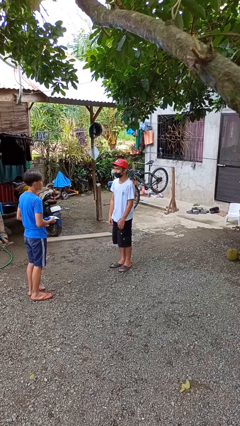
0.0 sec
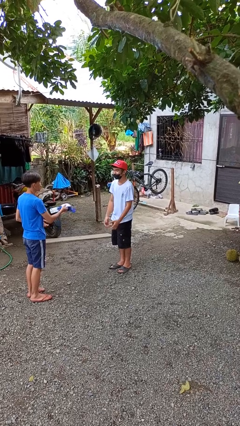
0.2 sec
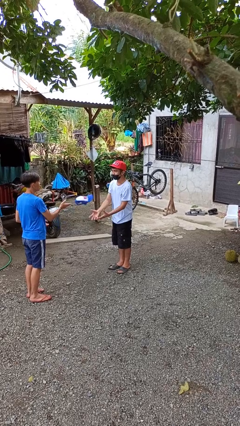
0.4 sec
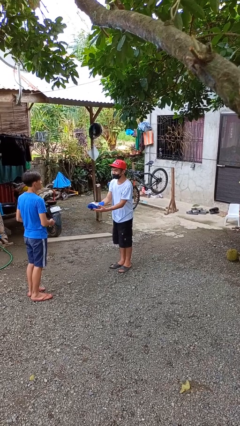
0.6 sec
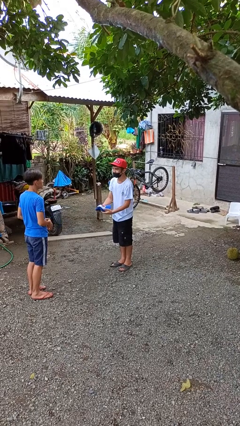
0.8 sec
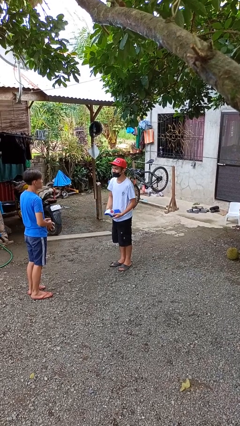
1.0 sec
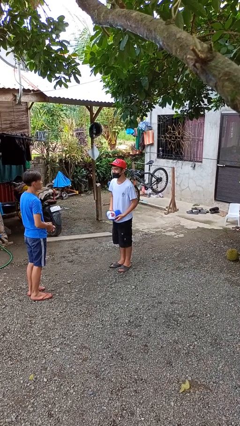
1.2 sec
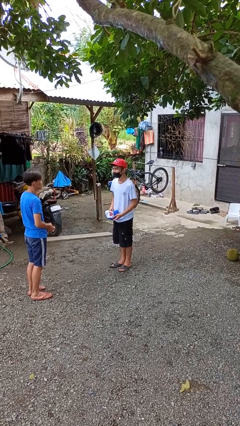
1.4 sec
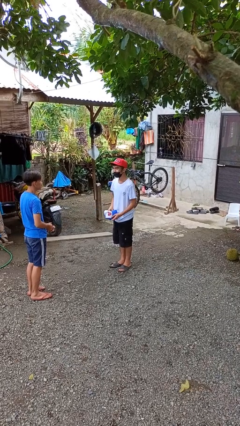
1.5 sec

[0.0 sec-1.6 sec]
person catches object from person

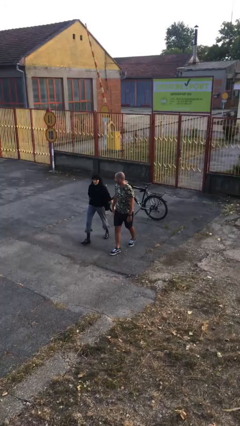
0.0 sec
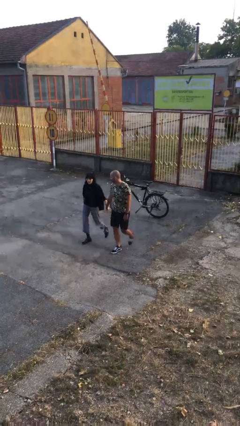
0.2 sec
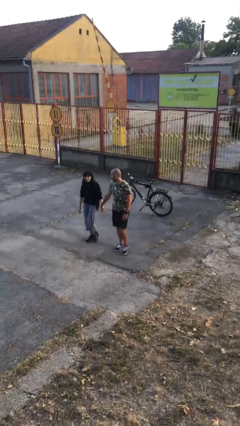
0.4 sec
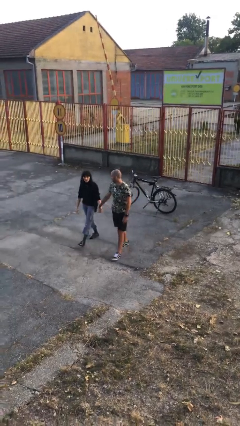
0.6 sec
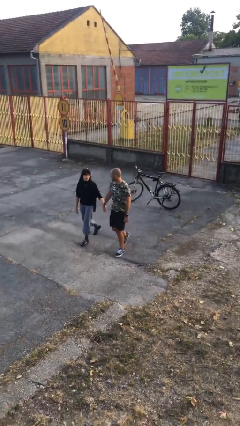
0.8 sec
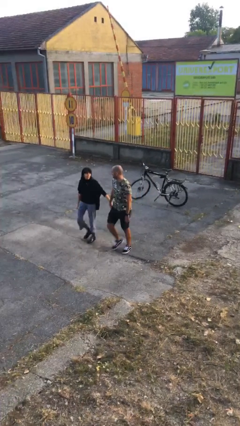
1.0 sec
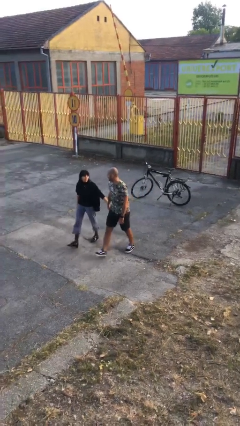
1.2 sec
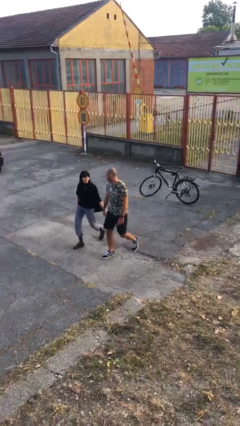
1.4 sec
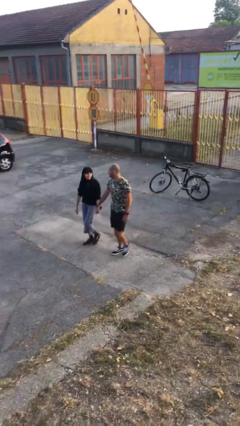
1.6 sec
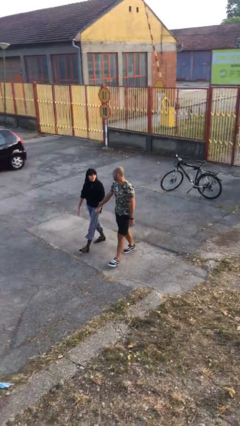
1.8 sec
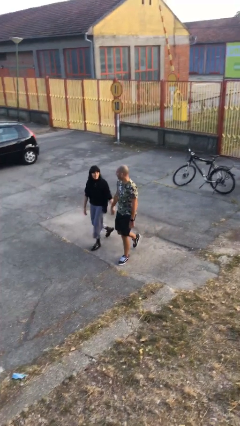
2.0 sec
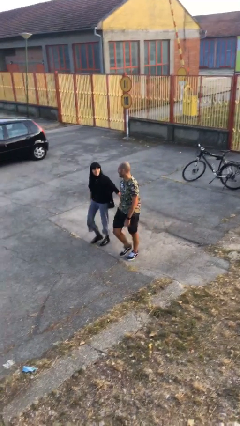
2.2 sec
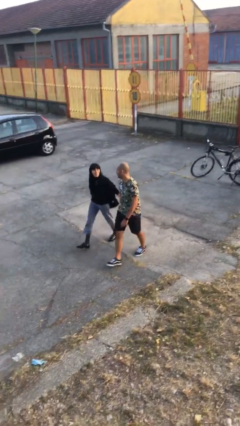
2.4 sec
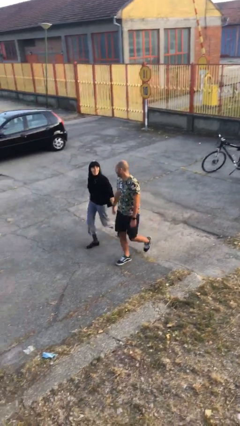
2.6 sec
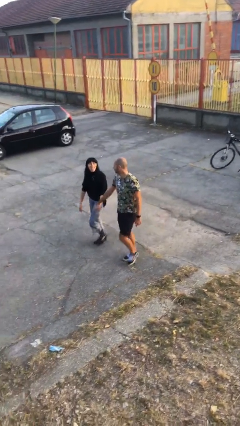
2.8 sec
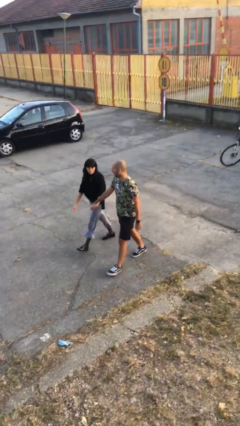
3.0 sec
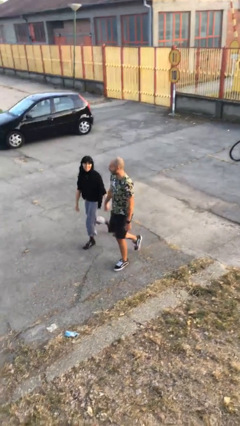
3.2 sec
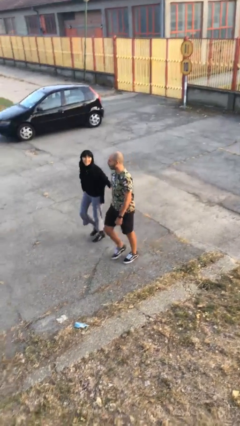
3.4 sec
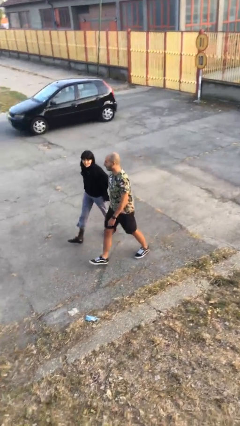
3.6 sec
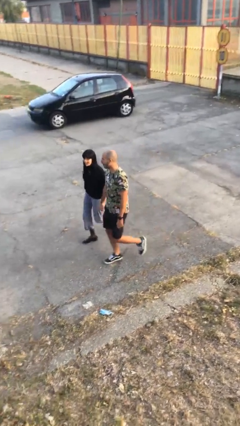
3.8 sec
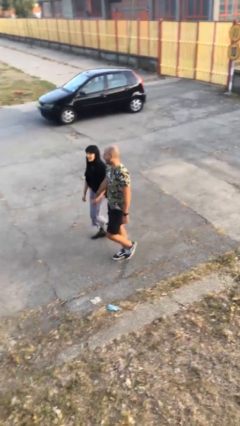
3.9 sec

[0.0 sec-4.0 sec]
person holds hand

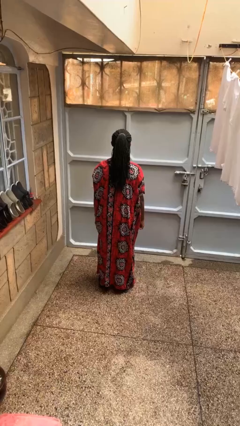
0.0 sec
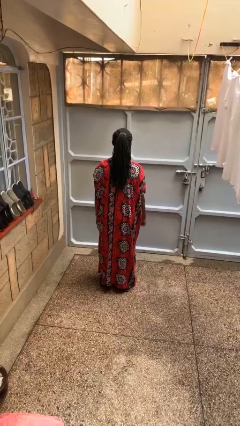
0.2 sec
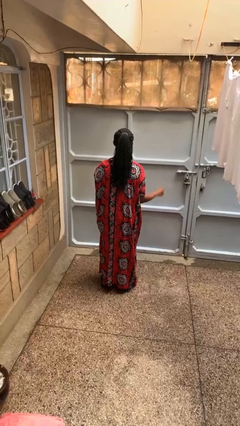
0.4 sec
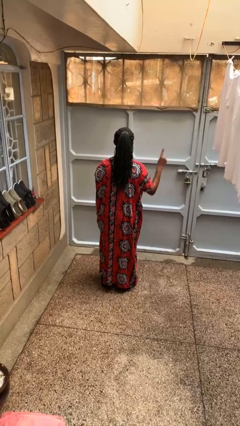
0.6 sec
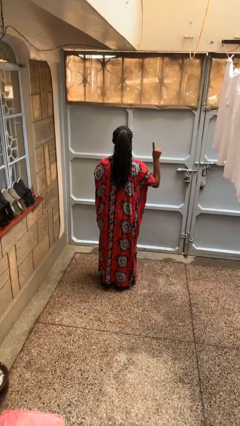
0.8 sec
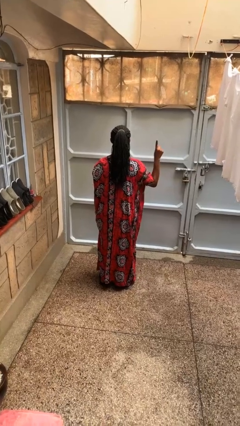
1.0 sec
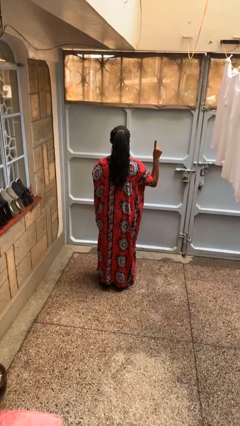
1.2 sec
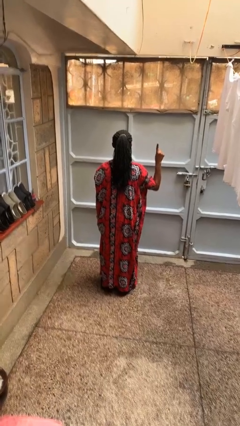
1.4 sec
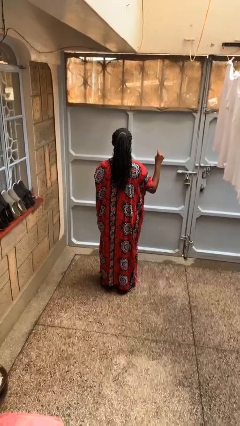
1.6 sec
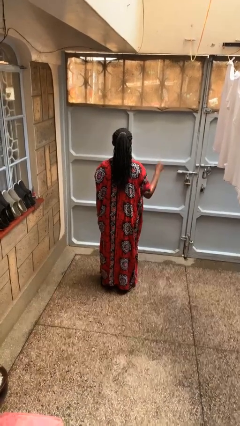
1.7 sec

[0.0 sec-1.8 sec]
person gestures number one

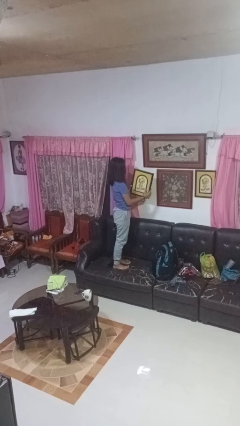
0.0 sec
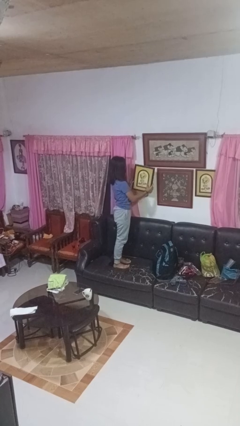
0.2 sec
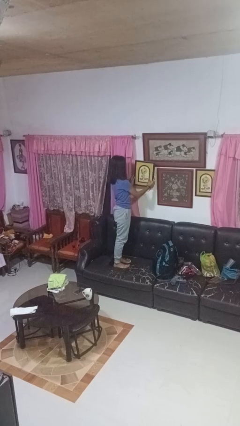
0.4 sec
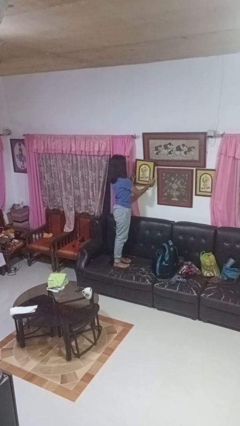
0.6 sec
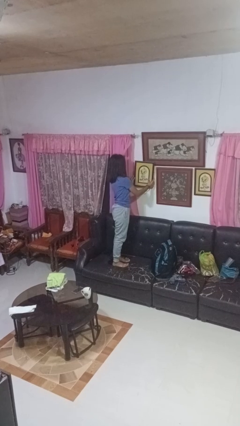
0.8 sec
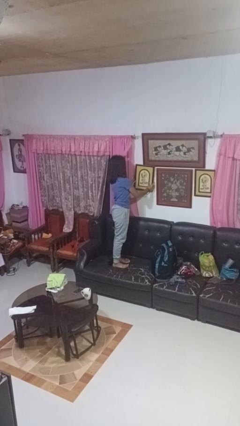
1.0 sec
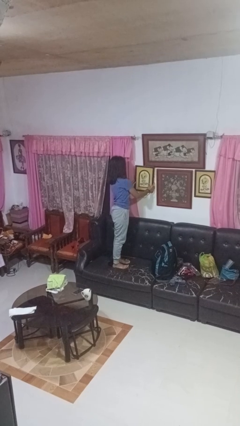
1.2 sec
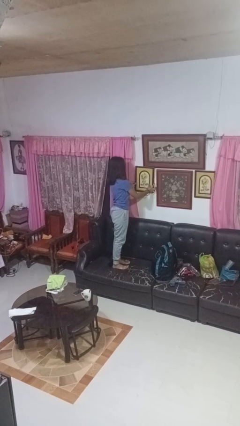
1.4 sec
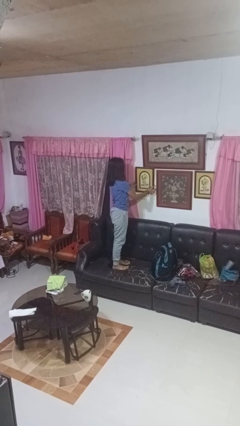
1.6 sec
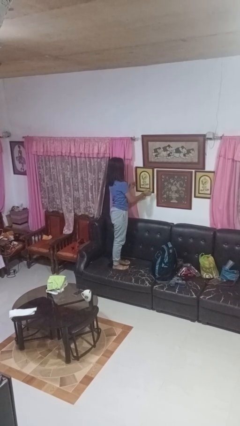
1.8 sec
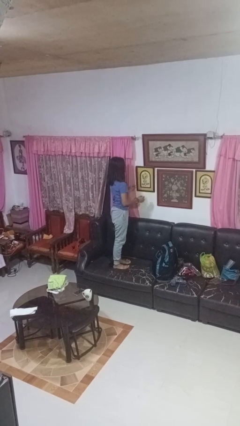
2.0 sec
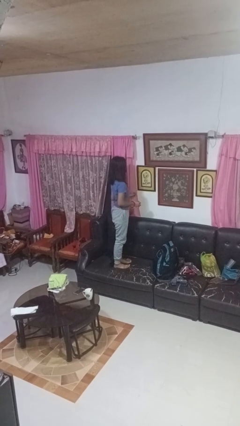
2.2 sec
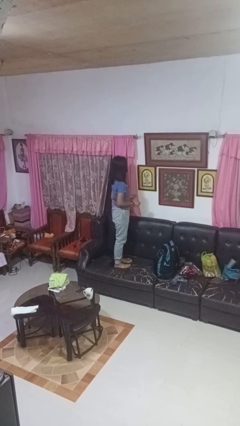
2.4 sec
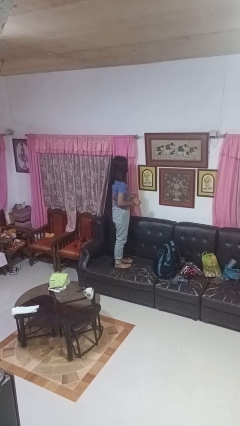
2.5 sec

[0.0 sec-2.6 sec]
person puts up picture frame

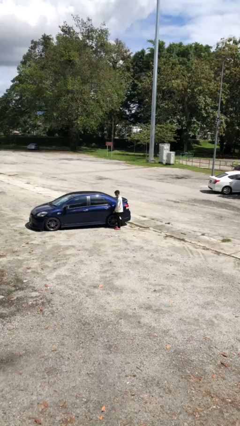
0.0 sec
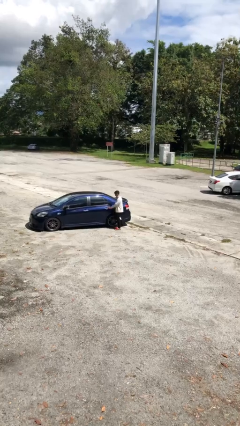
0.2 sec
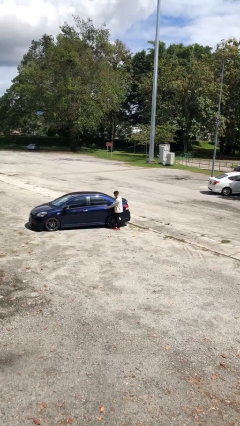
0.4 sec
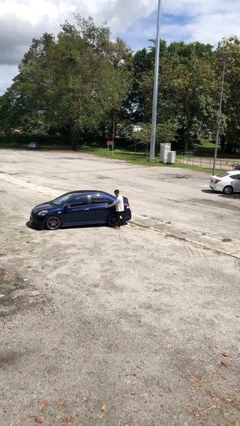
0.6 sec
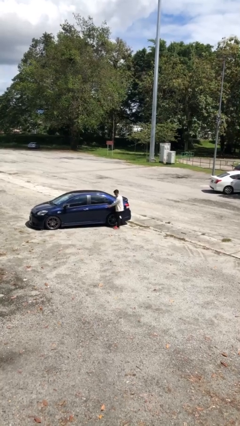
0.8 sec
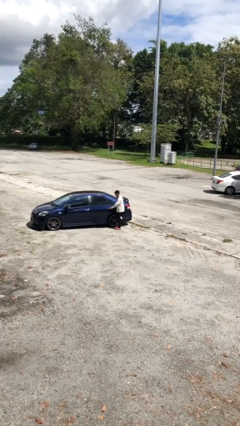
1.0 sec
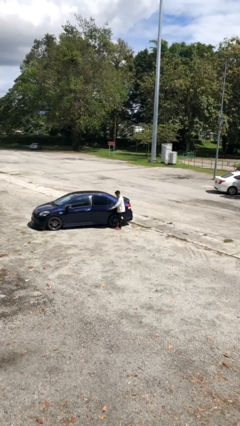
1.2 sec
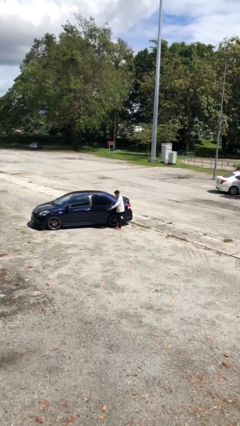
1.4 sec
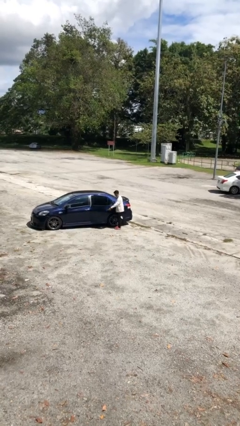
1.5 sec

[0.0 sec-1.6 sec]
person opens car door

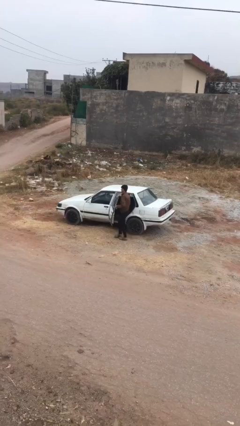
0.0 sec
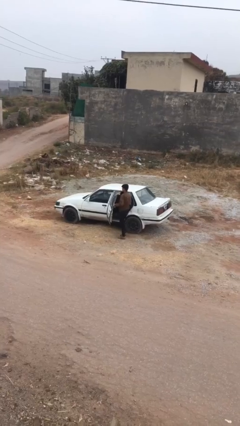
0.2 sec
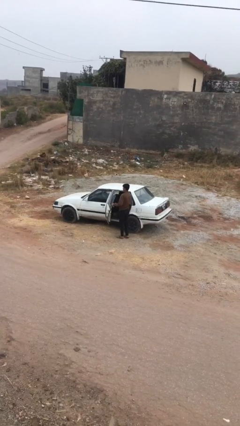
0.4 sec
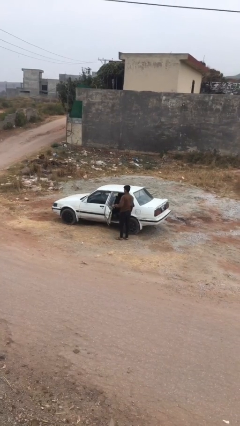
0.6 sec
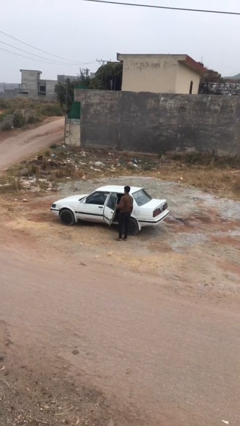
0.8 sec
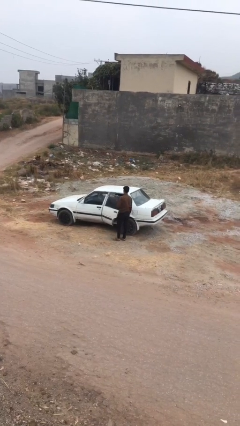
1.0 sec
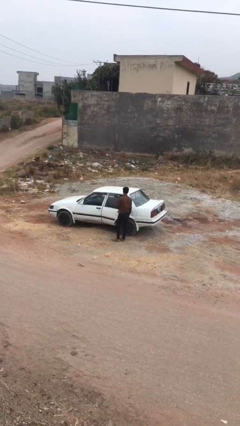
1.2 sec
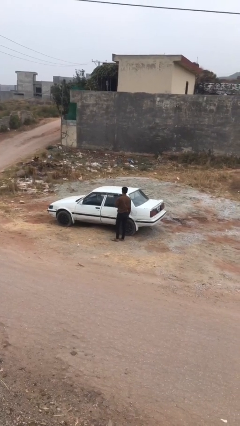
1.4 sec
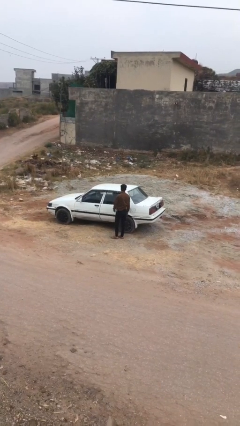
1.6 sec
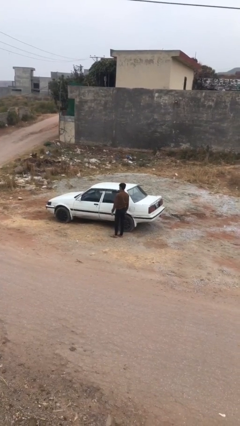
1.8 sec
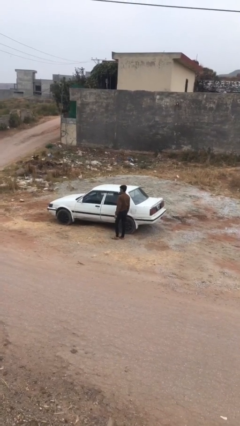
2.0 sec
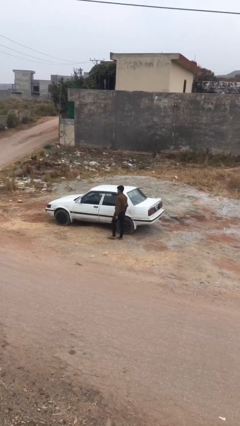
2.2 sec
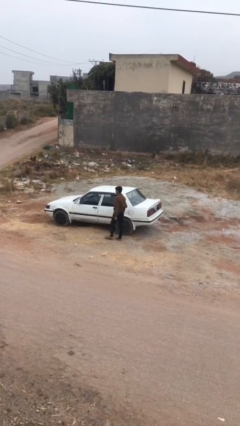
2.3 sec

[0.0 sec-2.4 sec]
person closes car door

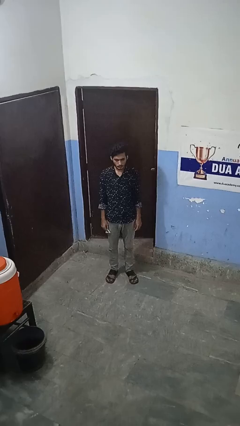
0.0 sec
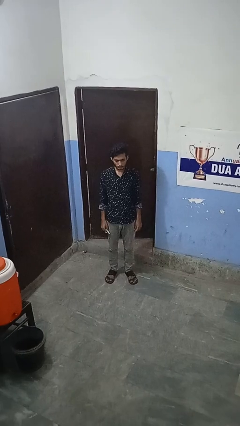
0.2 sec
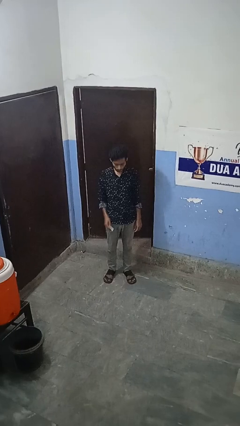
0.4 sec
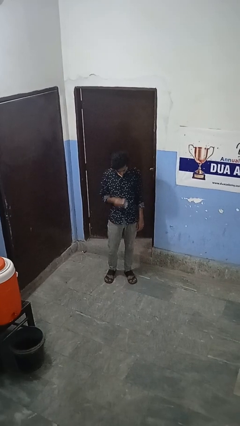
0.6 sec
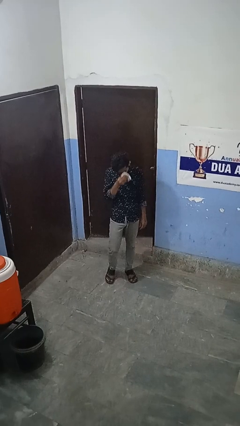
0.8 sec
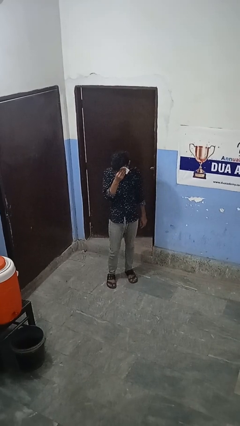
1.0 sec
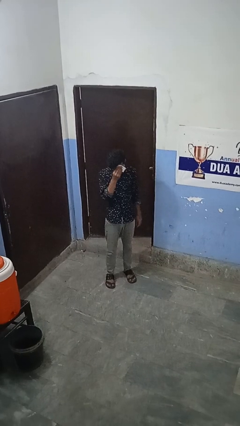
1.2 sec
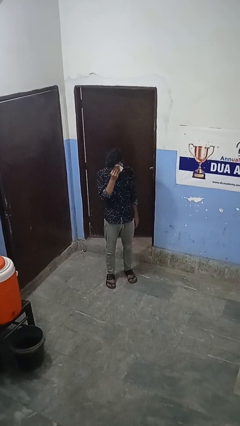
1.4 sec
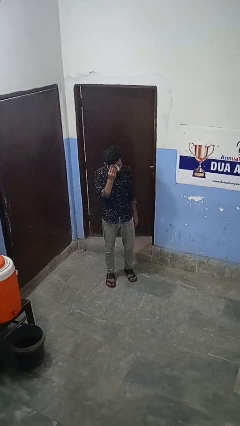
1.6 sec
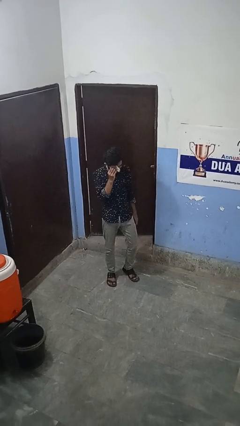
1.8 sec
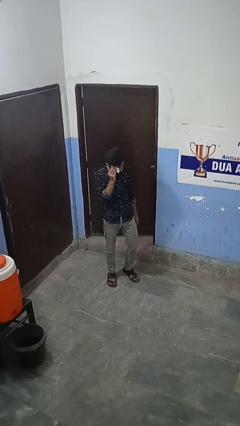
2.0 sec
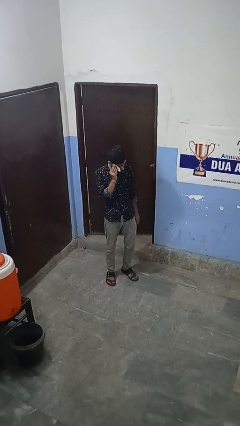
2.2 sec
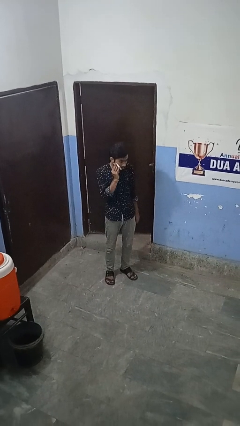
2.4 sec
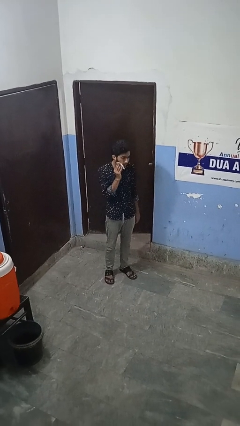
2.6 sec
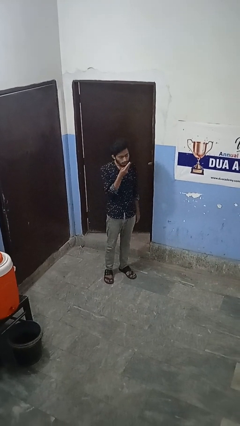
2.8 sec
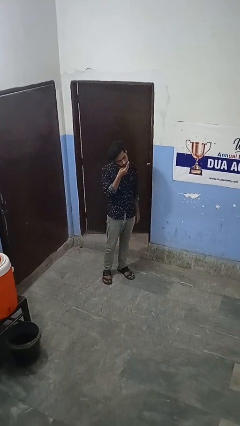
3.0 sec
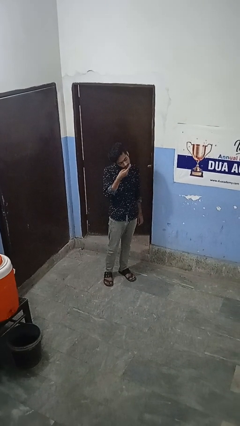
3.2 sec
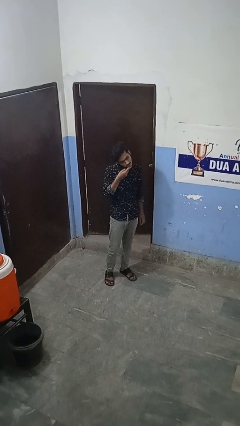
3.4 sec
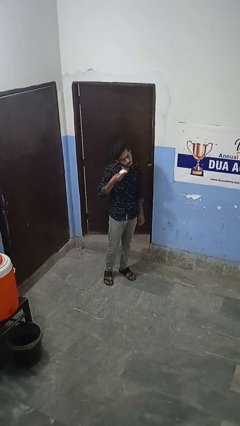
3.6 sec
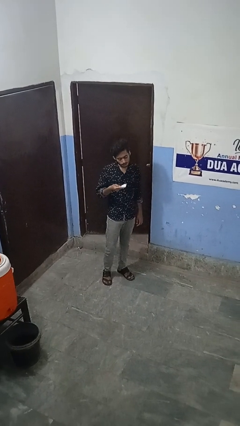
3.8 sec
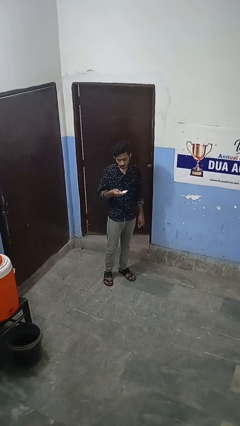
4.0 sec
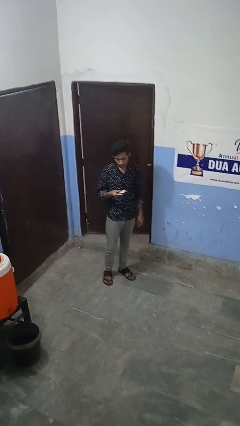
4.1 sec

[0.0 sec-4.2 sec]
person wipes mouth with napkin
